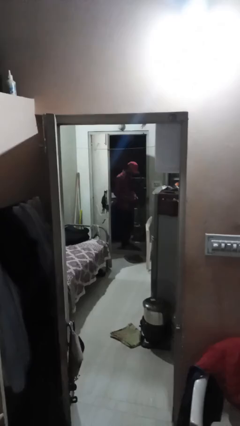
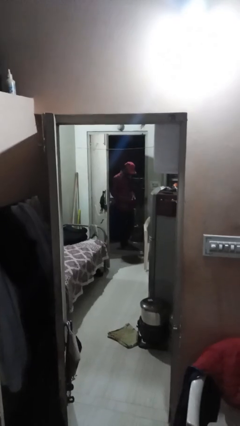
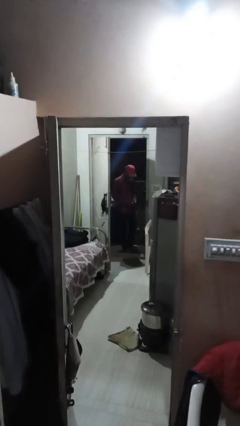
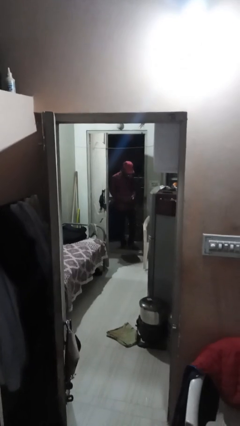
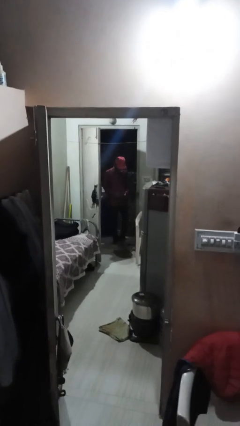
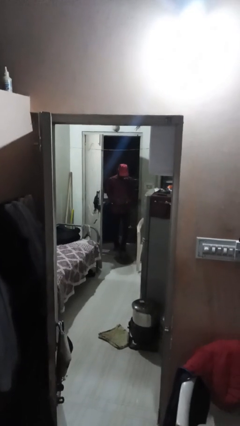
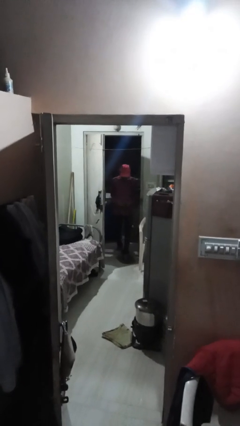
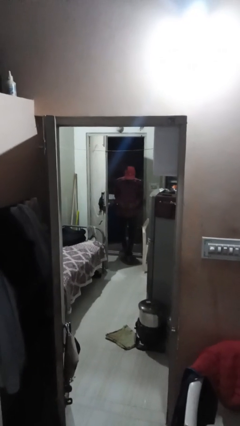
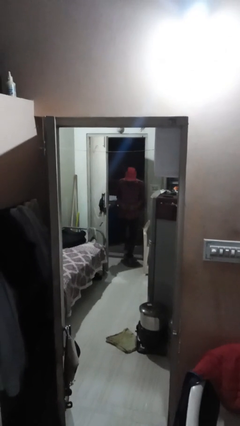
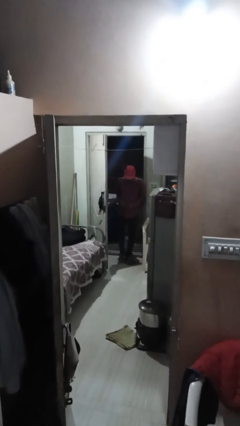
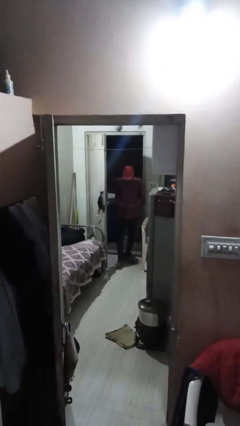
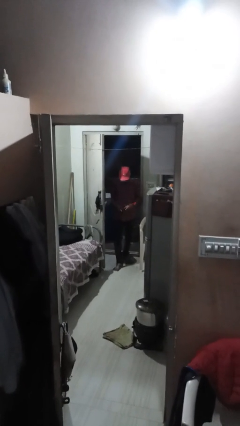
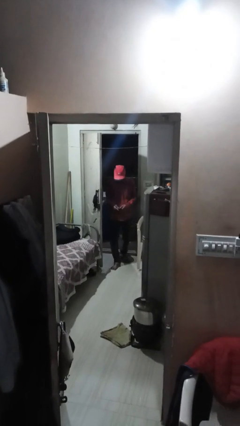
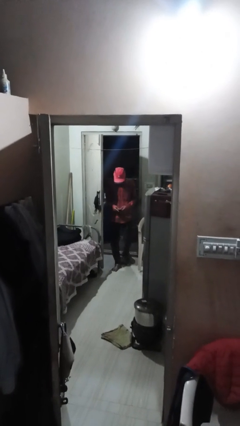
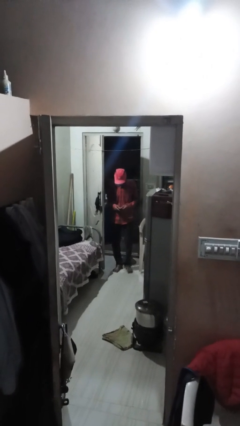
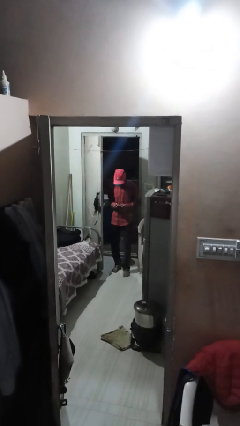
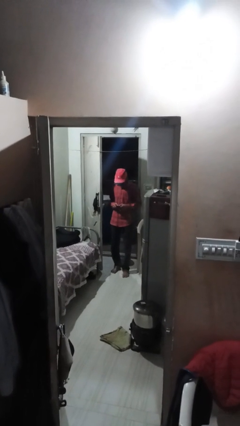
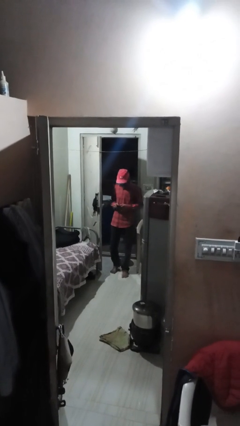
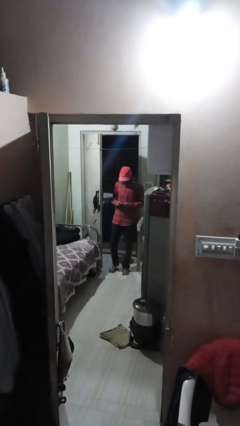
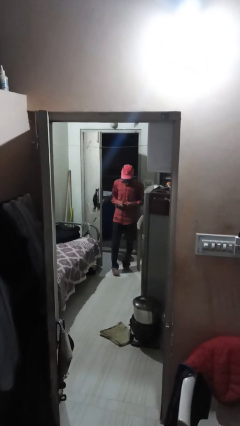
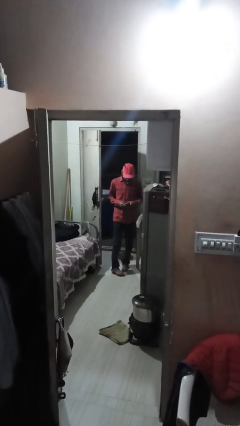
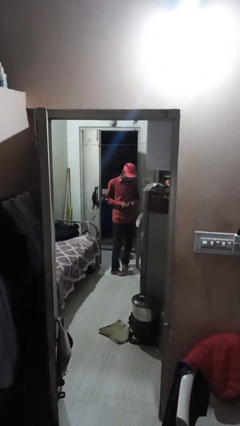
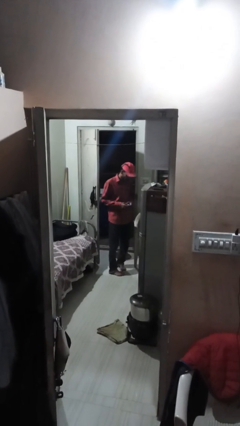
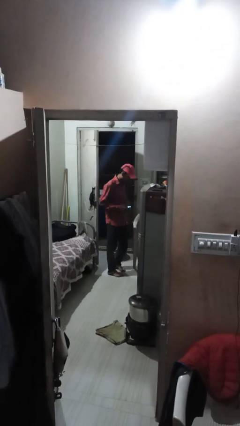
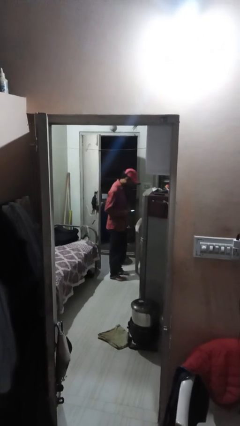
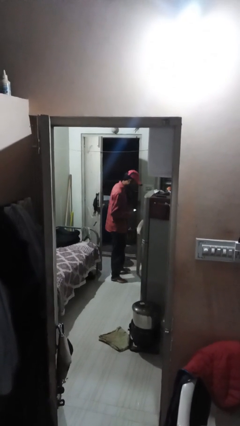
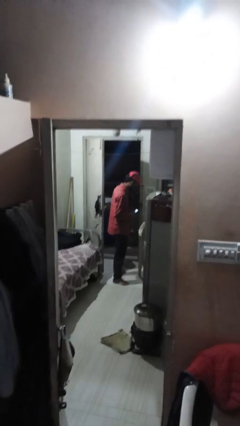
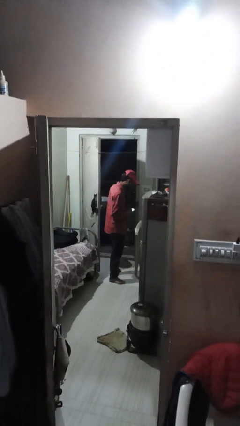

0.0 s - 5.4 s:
person enters scene through structure

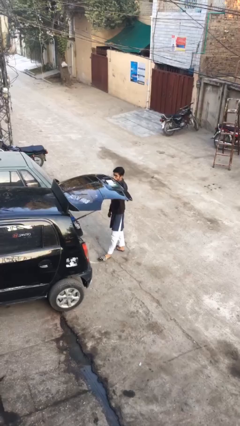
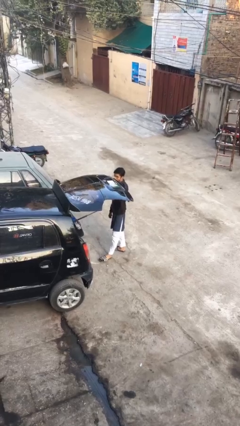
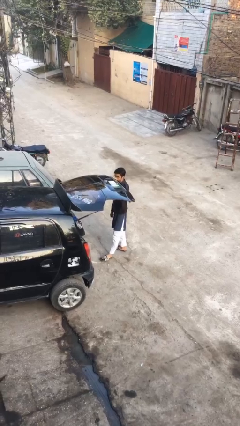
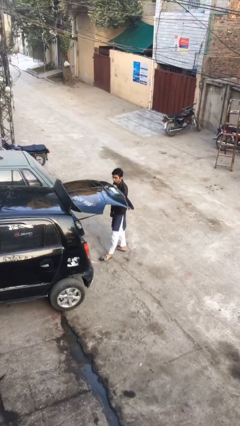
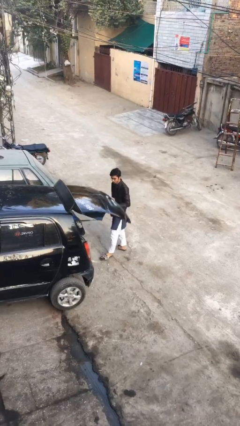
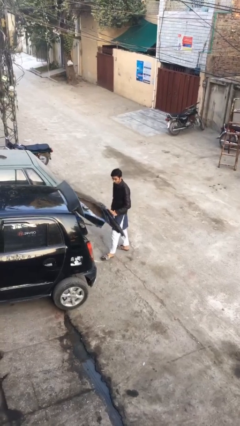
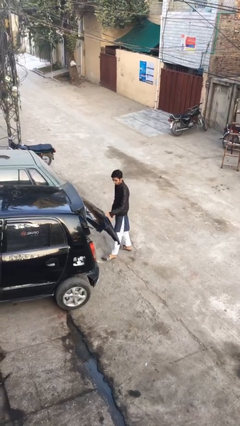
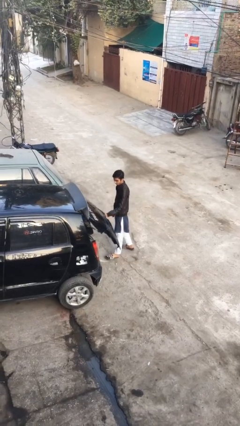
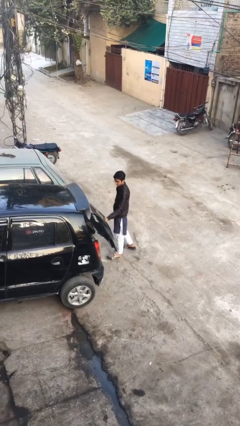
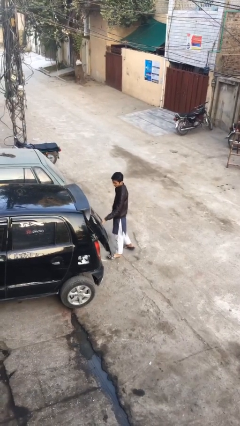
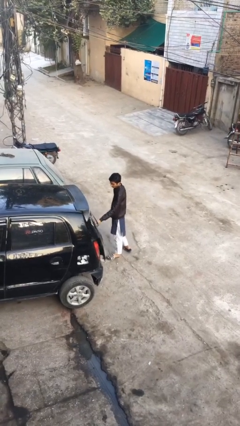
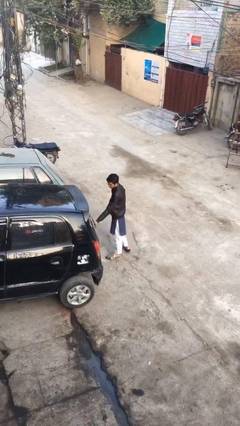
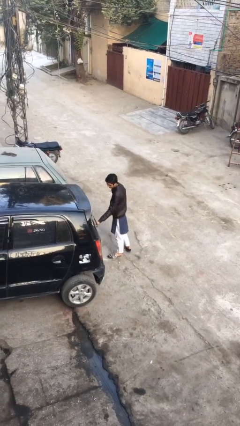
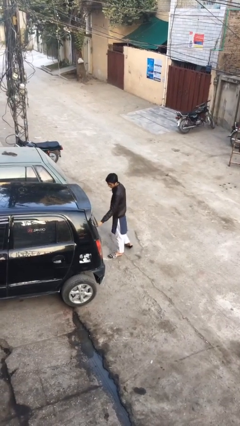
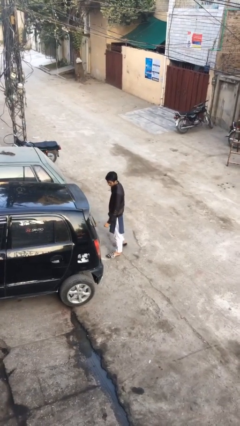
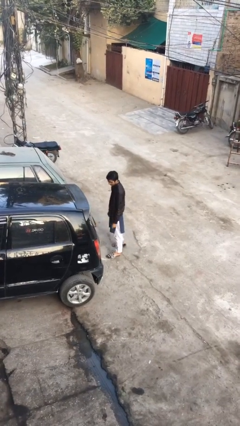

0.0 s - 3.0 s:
person closes car trunk

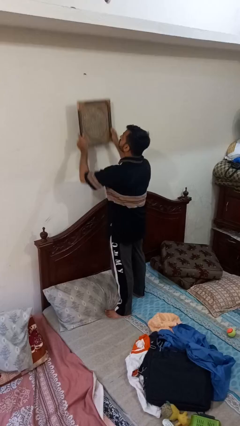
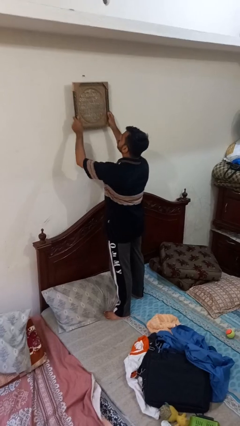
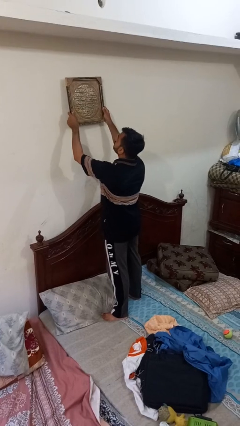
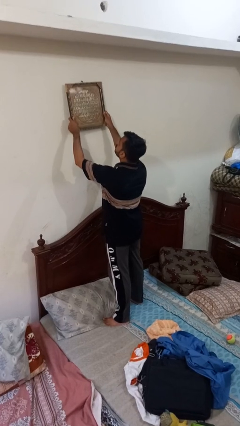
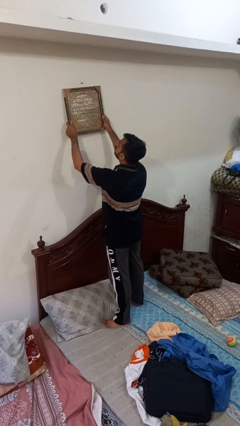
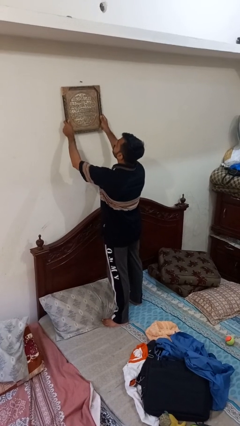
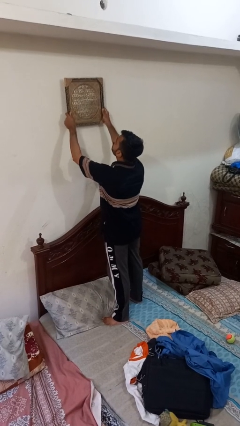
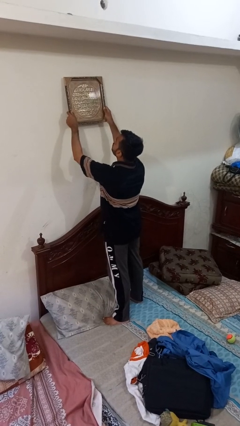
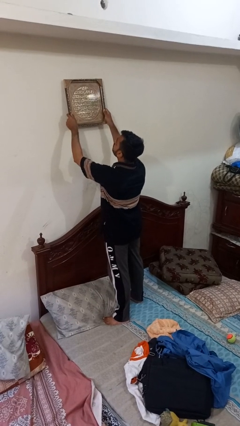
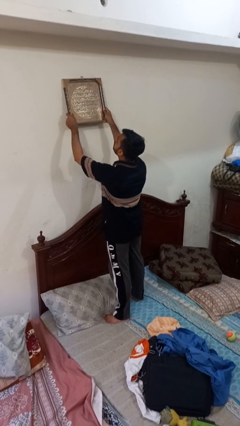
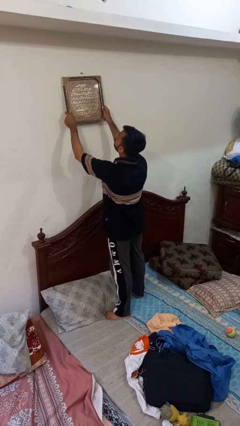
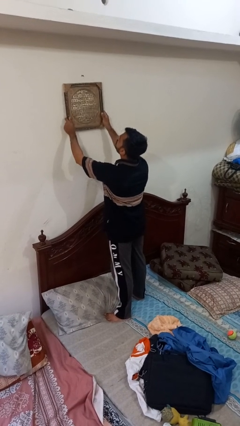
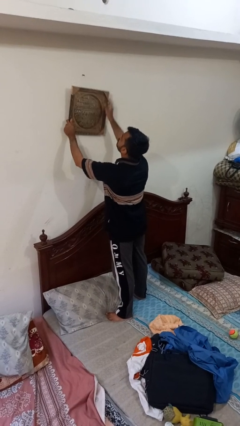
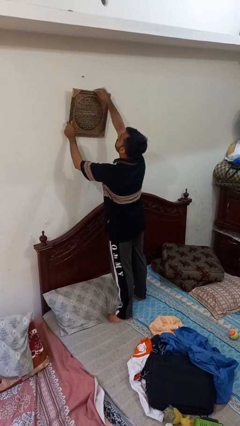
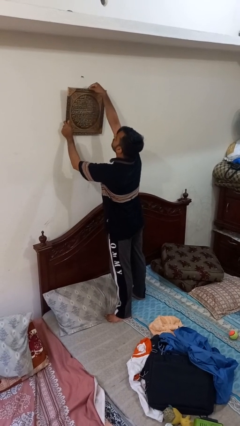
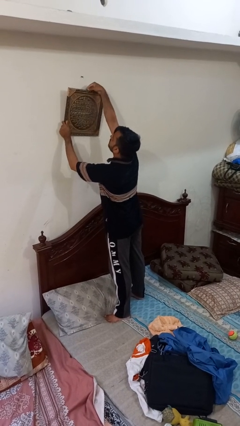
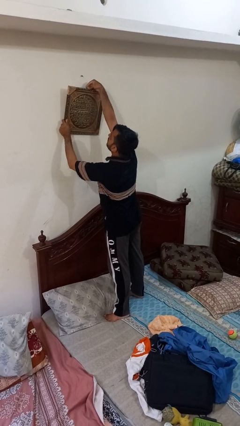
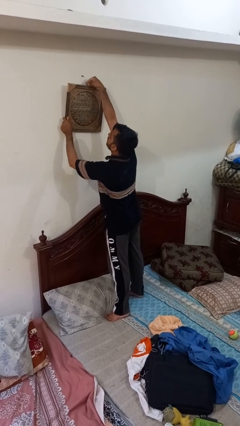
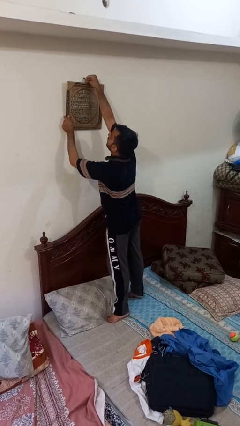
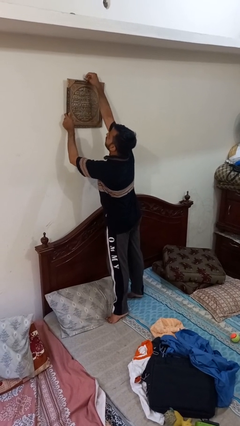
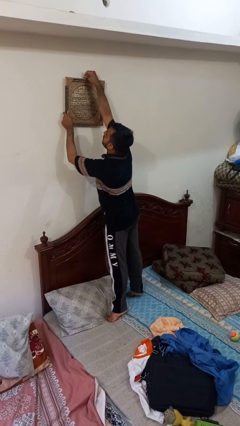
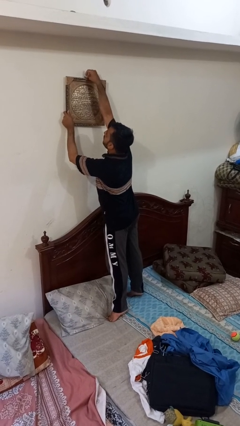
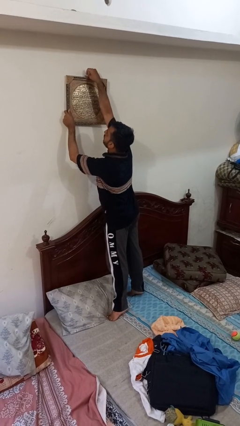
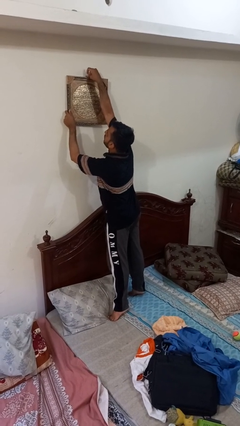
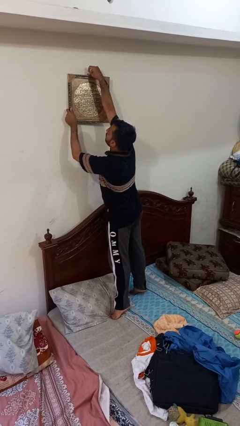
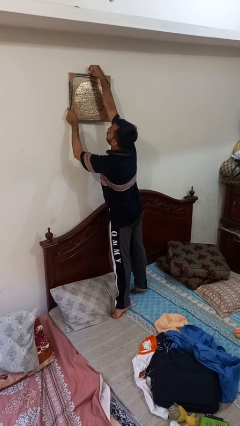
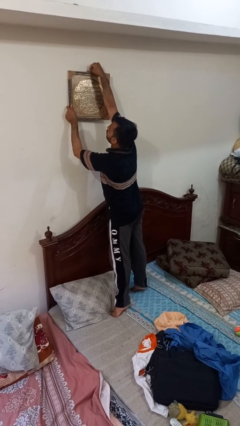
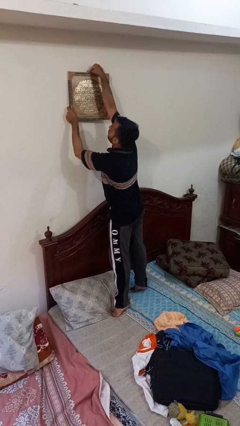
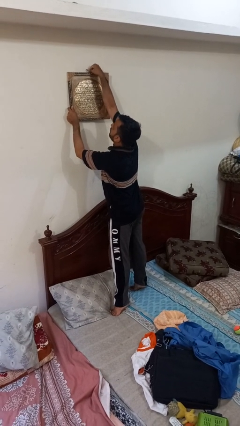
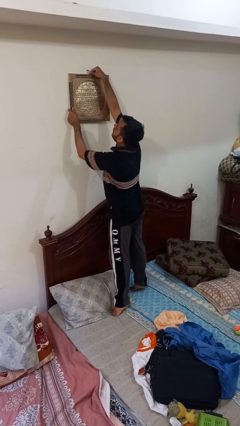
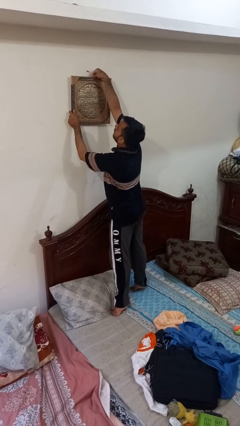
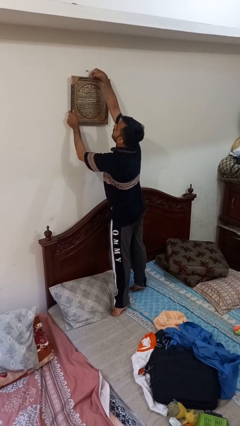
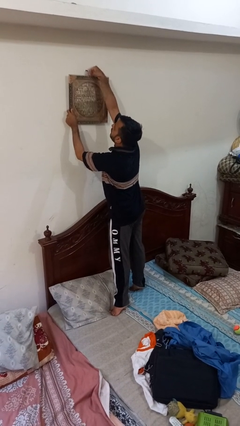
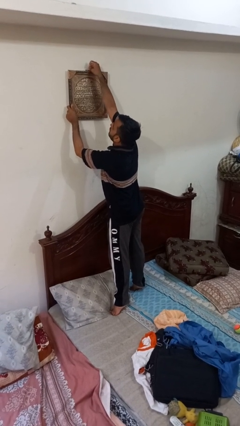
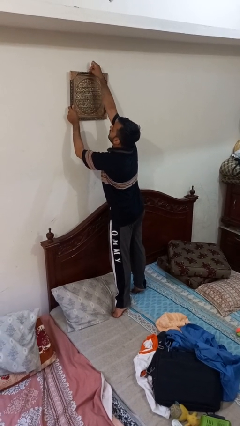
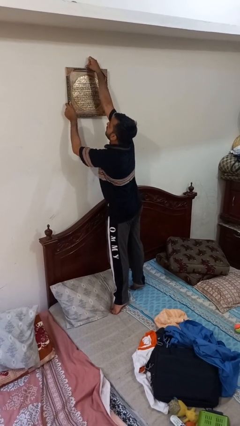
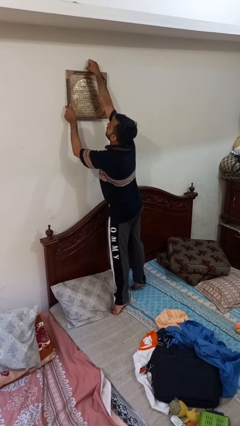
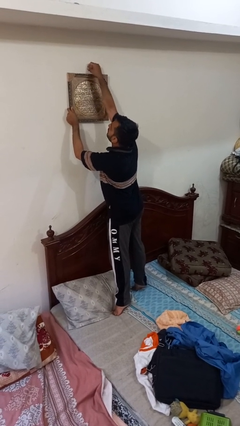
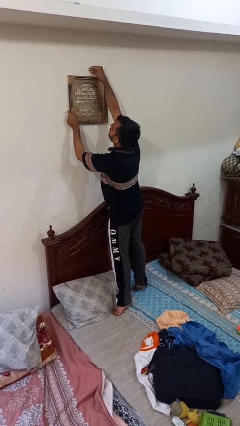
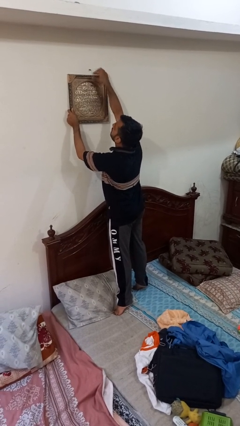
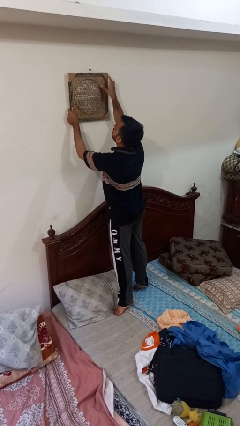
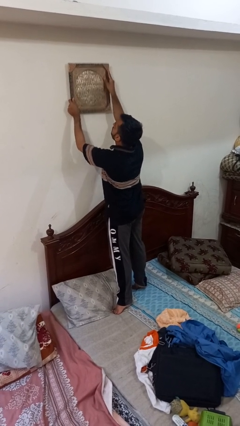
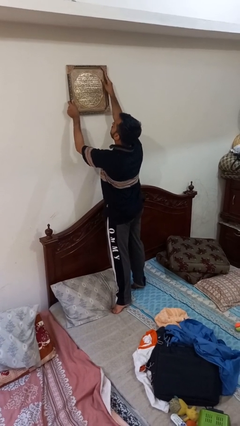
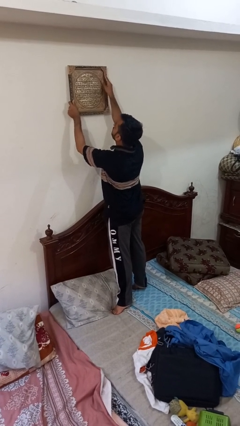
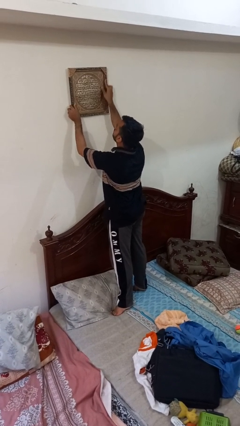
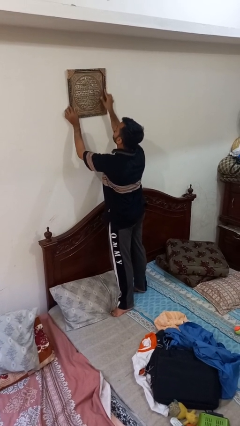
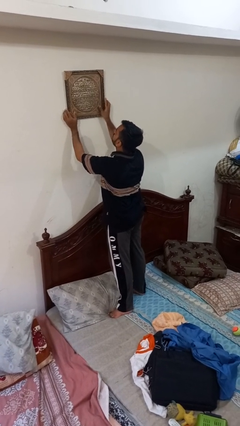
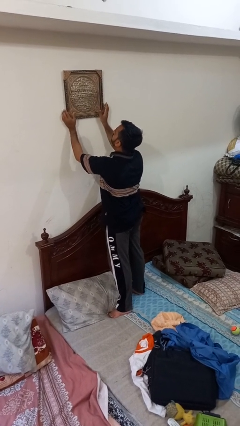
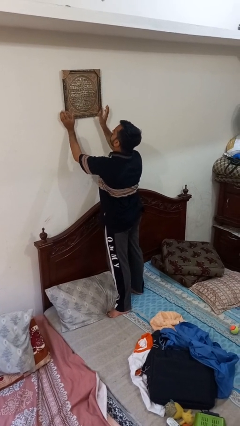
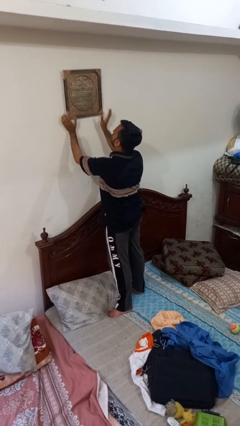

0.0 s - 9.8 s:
person puts up picture frame

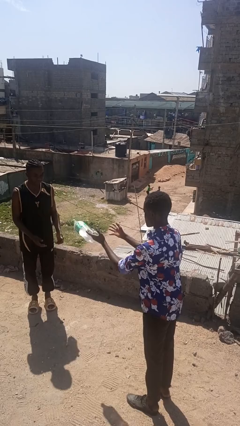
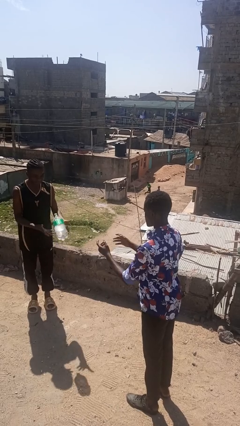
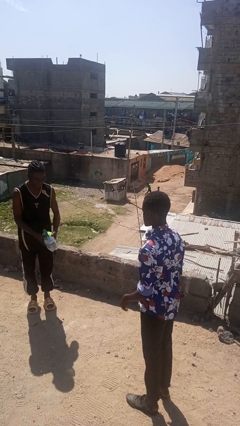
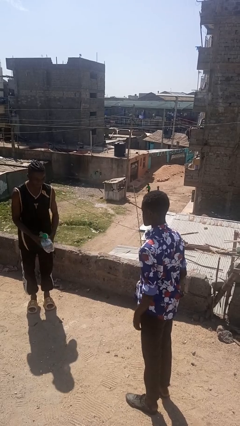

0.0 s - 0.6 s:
person throws object to person
